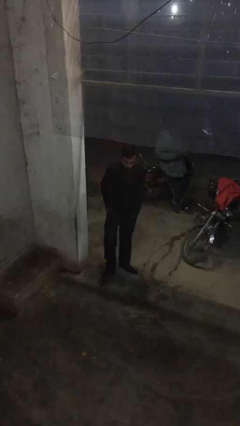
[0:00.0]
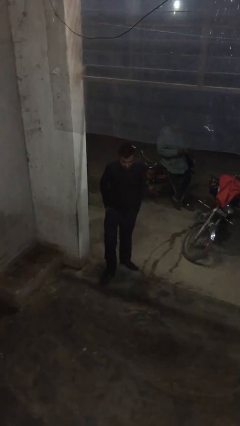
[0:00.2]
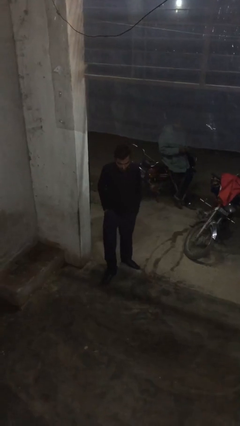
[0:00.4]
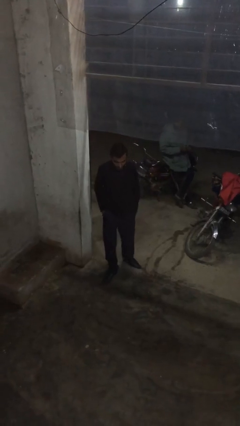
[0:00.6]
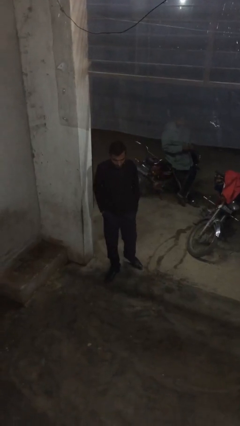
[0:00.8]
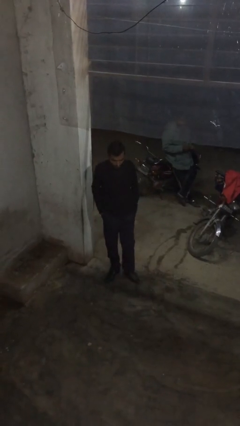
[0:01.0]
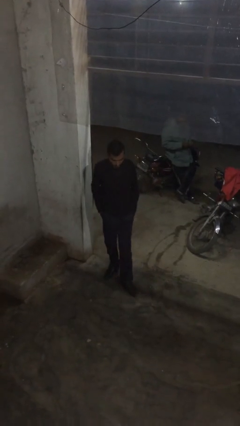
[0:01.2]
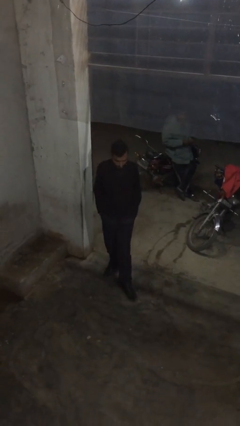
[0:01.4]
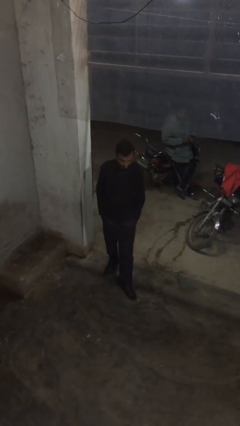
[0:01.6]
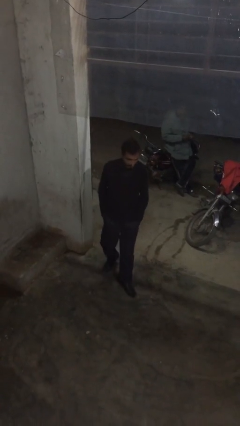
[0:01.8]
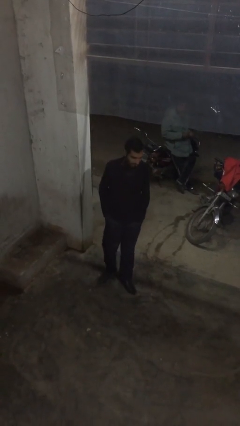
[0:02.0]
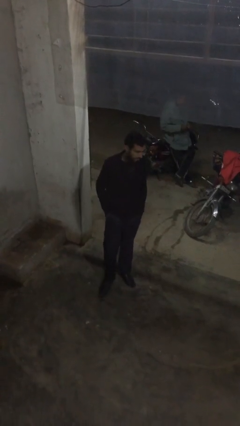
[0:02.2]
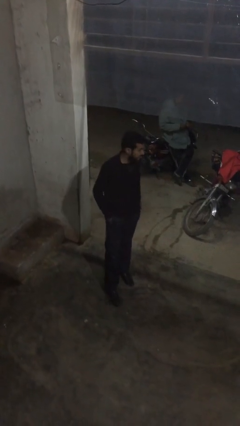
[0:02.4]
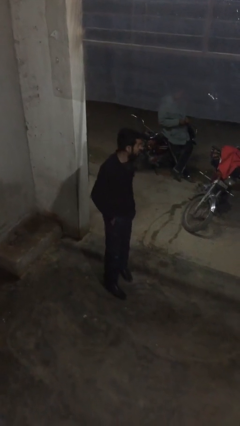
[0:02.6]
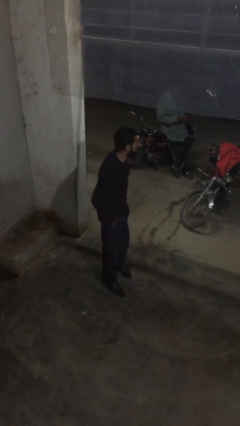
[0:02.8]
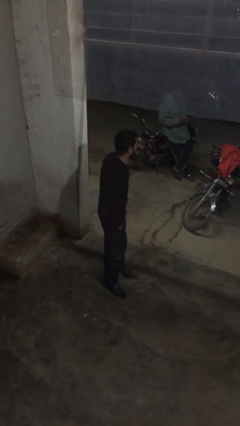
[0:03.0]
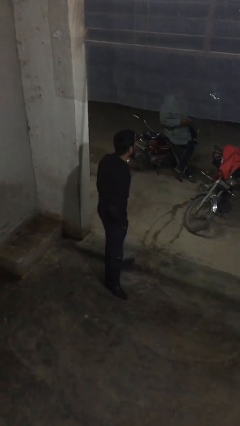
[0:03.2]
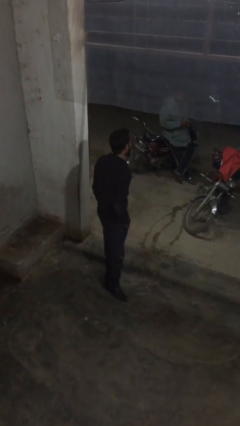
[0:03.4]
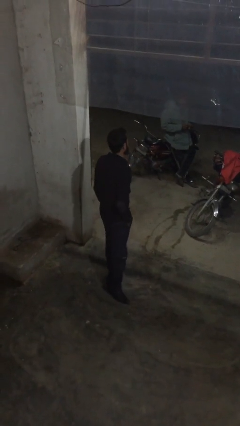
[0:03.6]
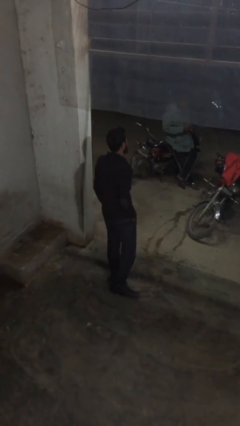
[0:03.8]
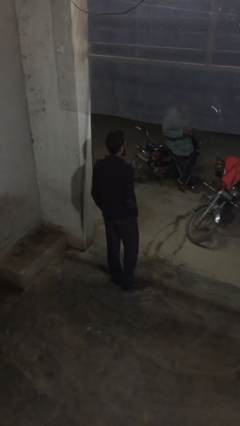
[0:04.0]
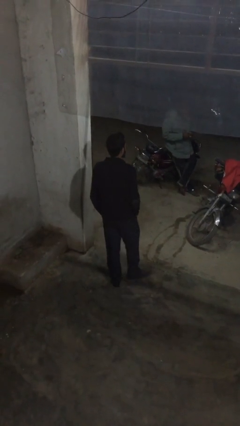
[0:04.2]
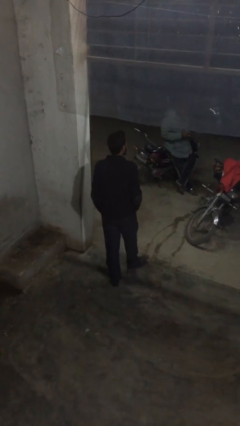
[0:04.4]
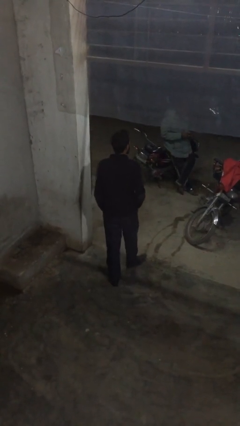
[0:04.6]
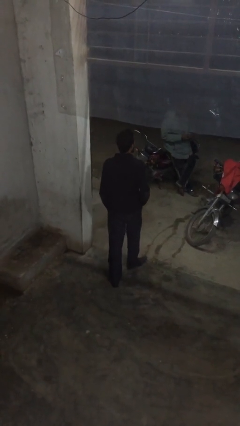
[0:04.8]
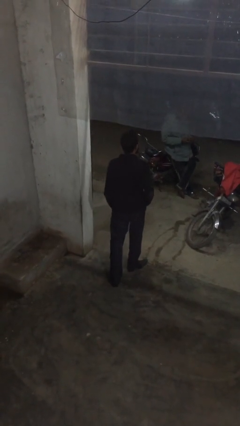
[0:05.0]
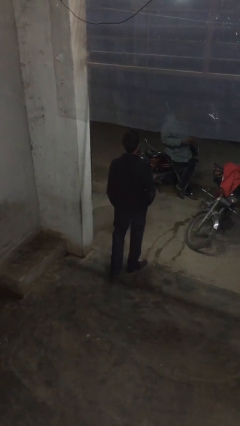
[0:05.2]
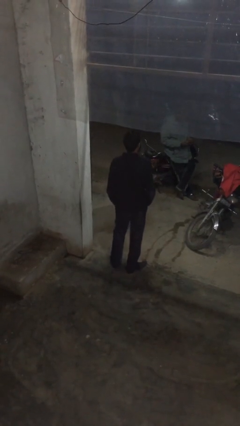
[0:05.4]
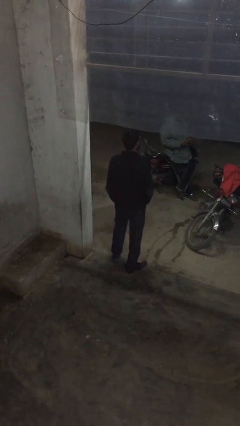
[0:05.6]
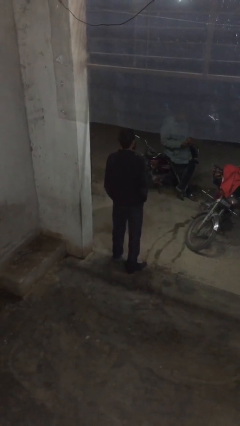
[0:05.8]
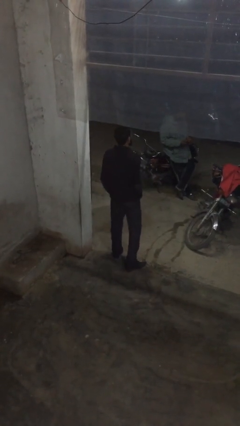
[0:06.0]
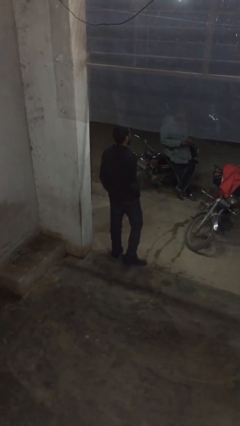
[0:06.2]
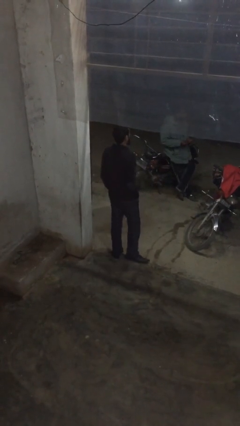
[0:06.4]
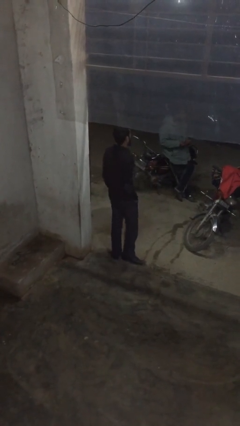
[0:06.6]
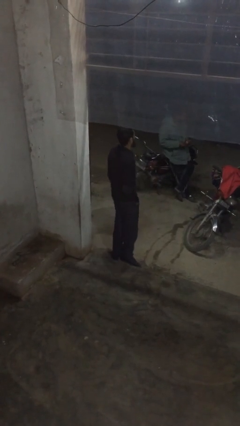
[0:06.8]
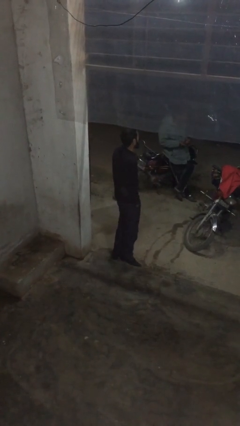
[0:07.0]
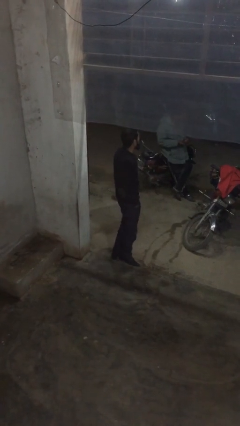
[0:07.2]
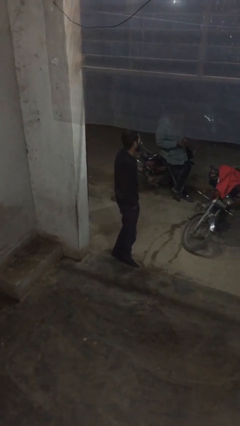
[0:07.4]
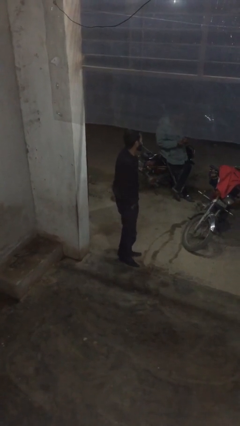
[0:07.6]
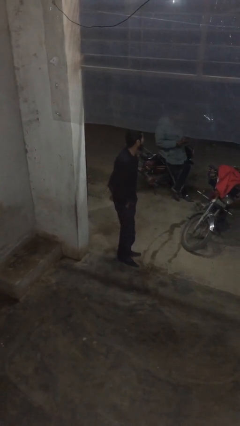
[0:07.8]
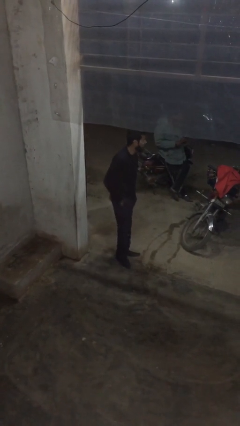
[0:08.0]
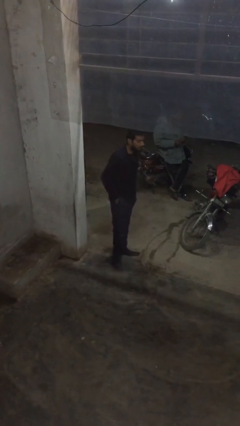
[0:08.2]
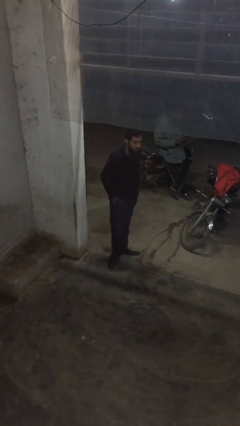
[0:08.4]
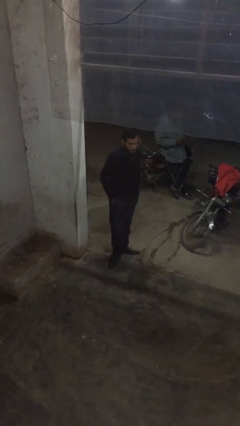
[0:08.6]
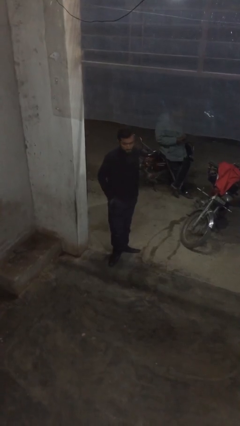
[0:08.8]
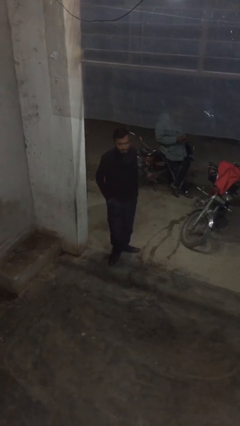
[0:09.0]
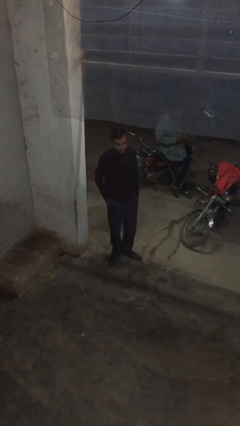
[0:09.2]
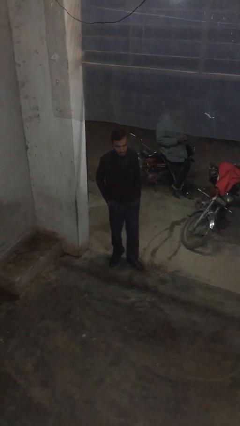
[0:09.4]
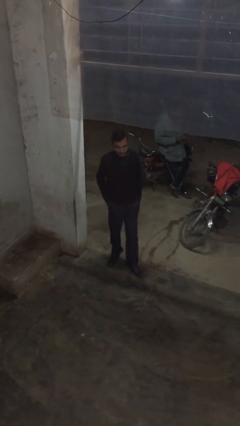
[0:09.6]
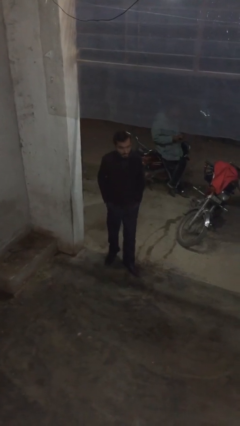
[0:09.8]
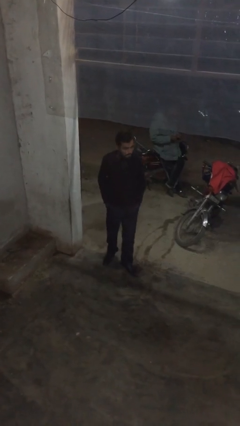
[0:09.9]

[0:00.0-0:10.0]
person walks

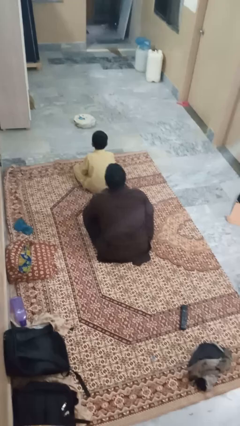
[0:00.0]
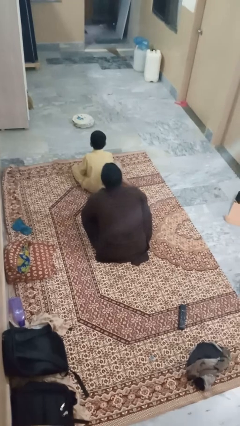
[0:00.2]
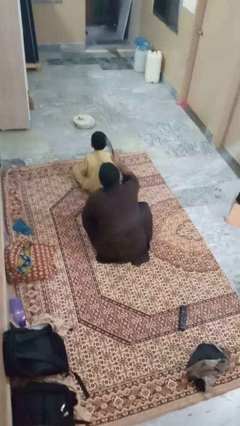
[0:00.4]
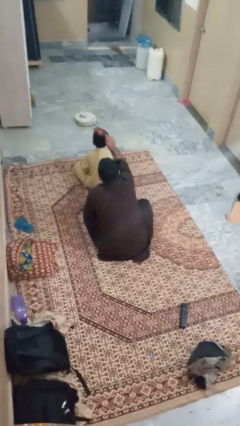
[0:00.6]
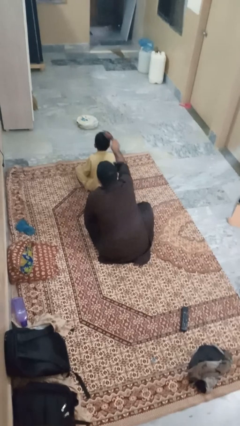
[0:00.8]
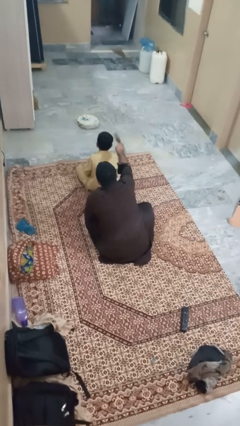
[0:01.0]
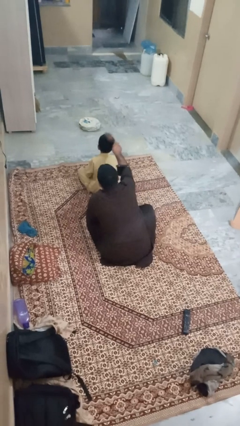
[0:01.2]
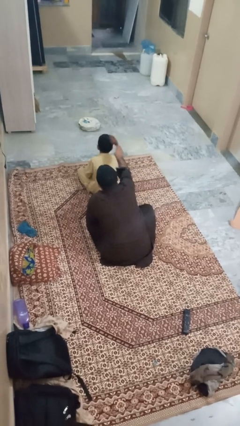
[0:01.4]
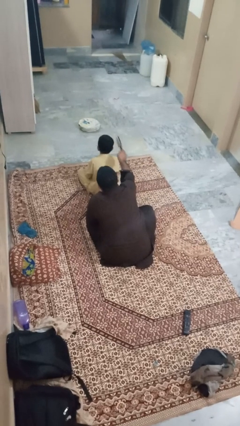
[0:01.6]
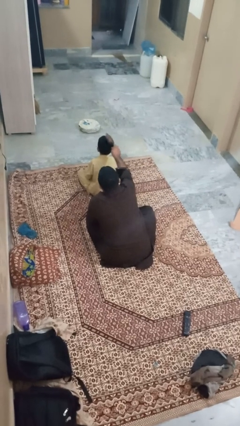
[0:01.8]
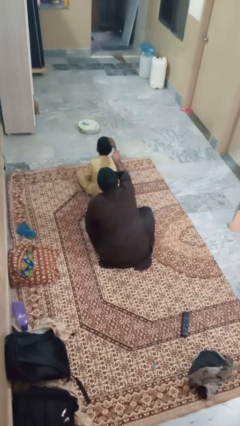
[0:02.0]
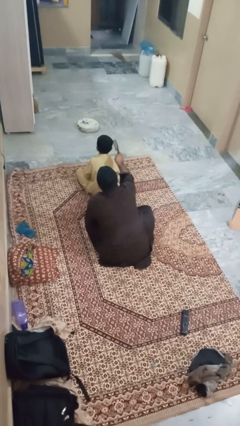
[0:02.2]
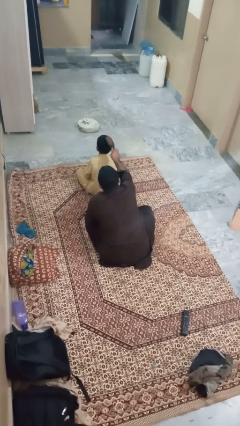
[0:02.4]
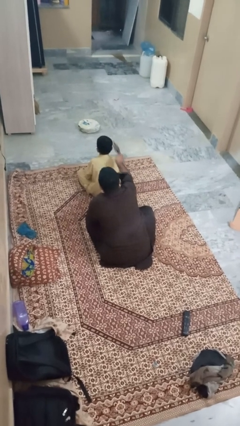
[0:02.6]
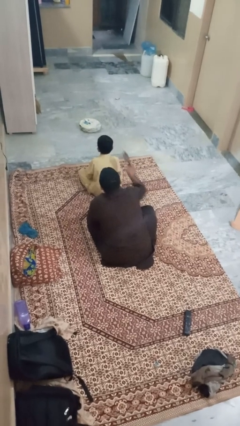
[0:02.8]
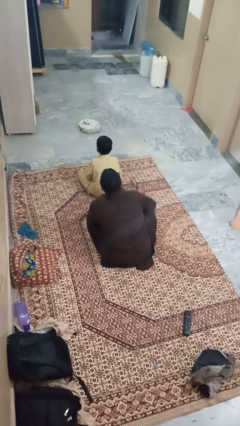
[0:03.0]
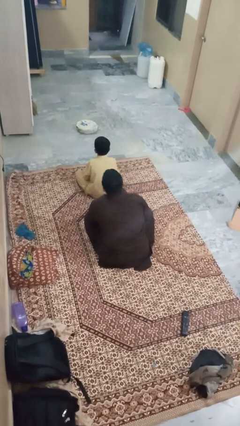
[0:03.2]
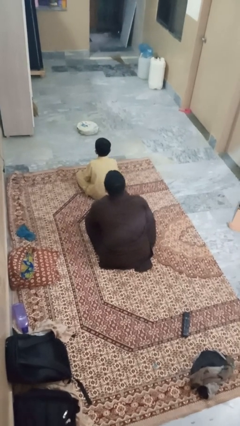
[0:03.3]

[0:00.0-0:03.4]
person brushes hair of person

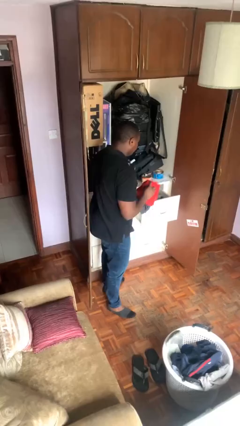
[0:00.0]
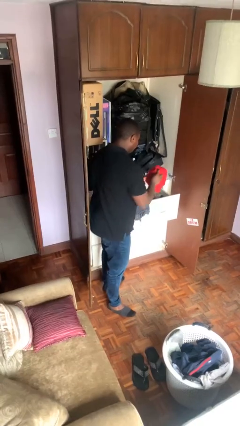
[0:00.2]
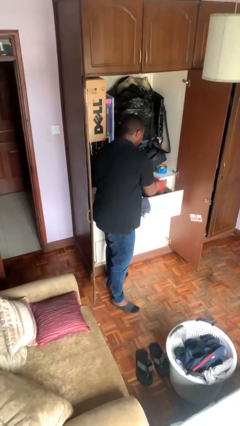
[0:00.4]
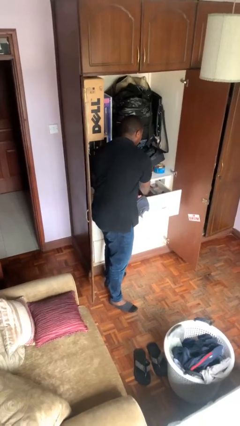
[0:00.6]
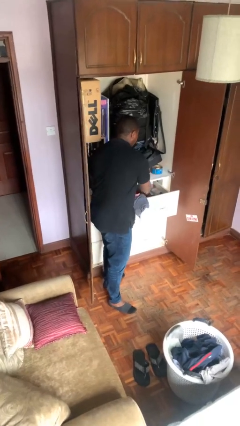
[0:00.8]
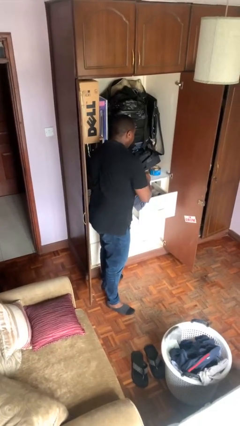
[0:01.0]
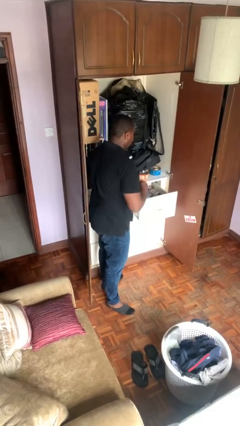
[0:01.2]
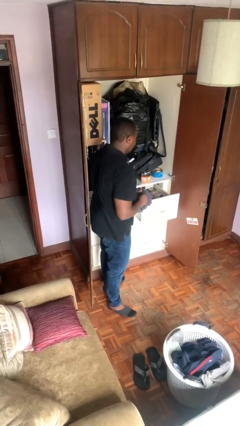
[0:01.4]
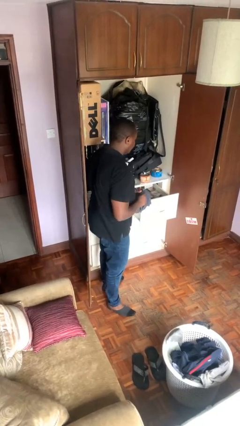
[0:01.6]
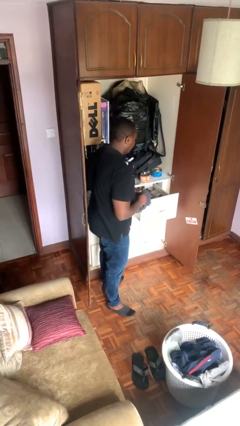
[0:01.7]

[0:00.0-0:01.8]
person puts clothes into dresser

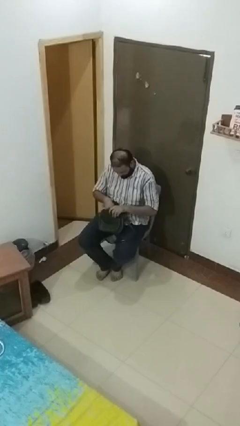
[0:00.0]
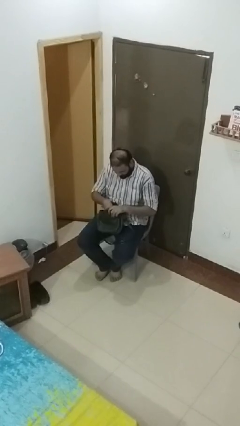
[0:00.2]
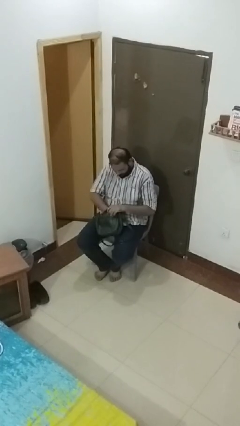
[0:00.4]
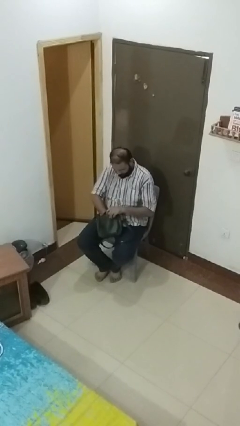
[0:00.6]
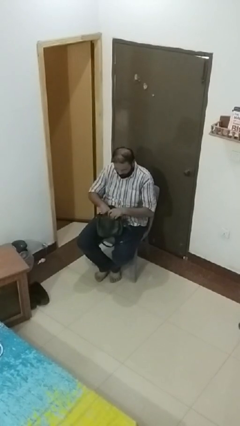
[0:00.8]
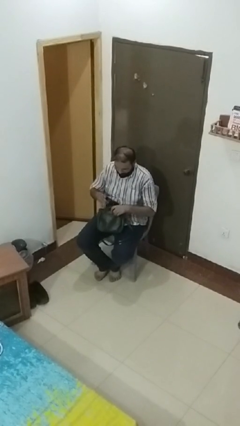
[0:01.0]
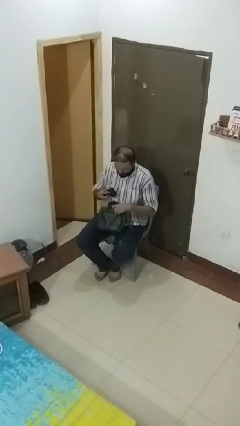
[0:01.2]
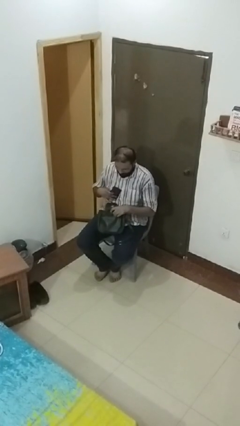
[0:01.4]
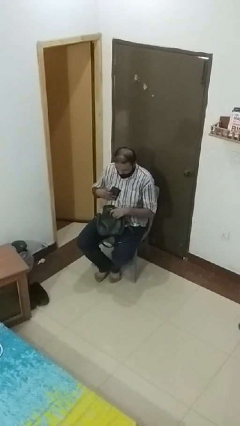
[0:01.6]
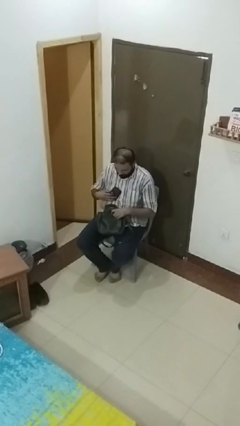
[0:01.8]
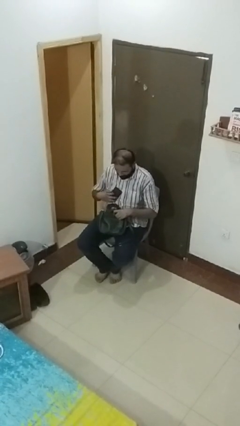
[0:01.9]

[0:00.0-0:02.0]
person takes object from purse

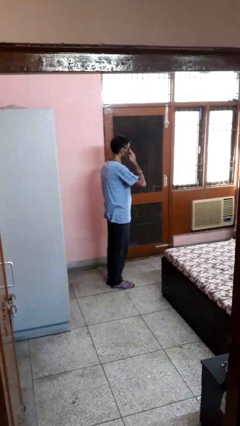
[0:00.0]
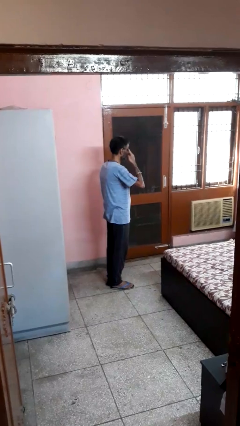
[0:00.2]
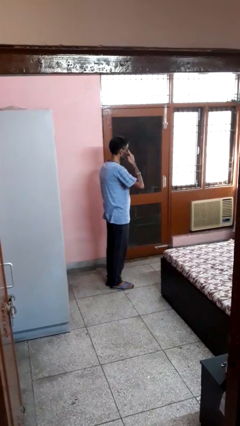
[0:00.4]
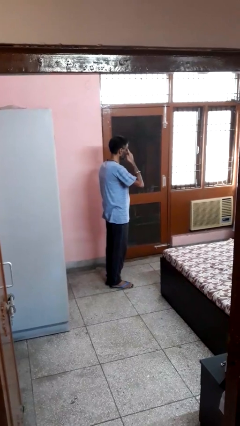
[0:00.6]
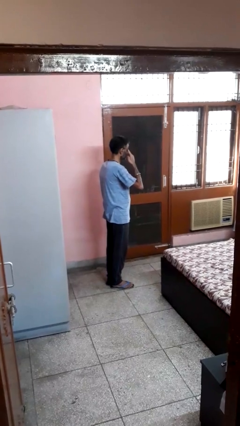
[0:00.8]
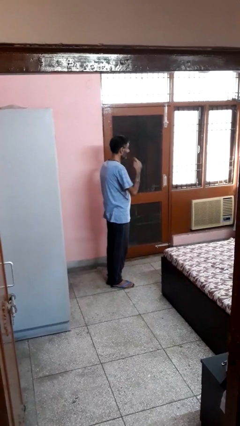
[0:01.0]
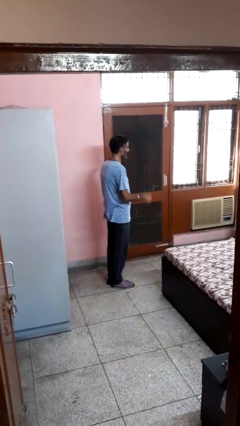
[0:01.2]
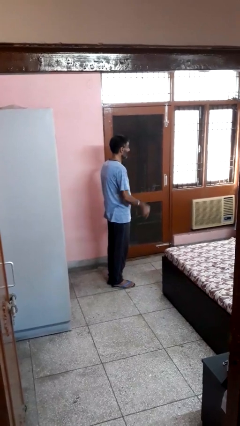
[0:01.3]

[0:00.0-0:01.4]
person rubs eyes
